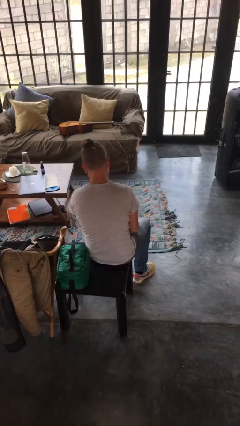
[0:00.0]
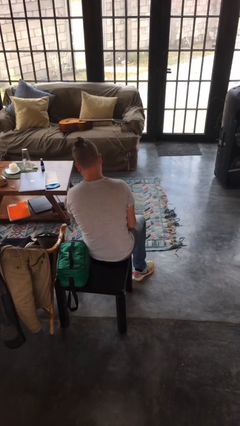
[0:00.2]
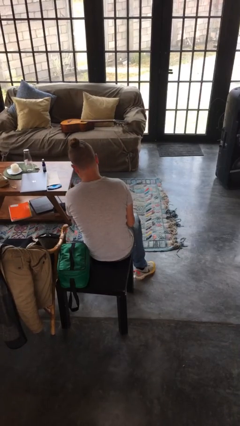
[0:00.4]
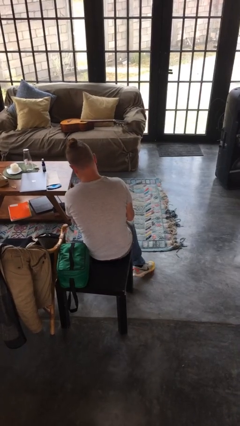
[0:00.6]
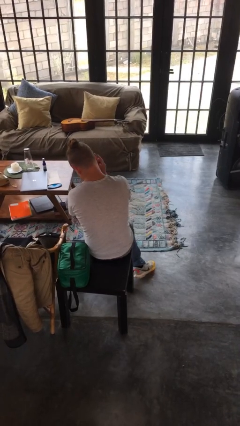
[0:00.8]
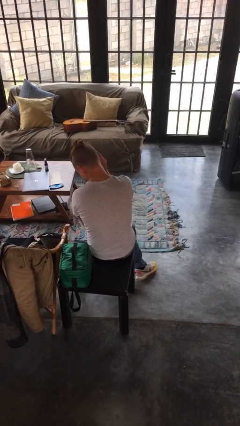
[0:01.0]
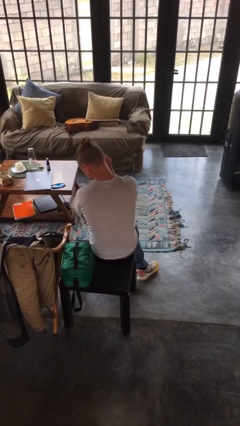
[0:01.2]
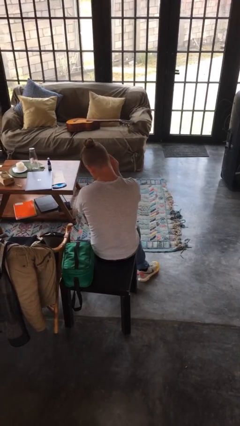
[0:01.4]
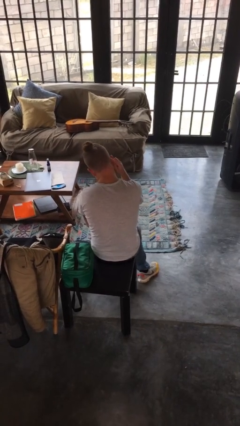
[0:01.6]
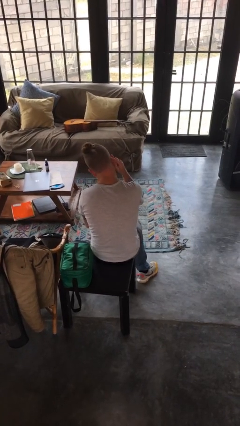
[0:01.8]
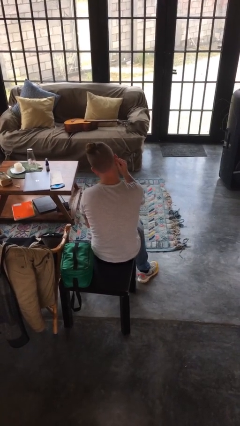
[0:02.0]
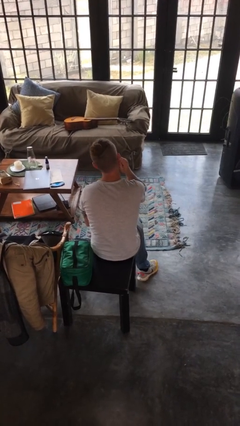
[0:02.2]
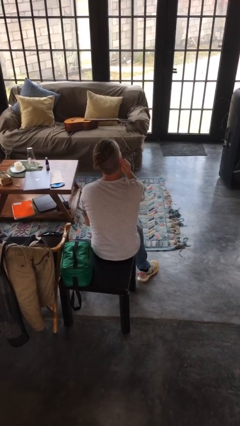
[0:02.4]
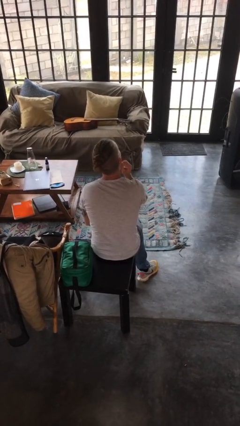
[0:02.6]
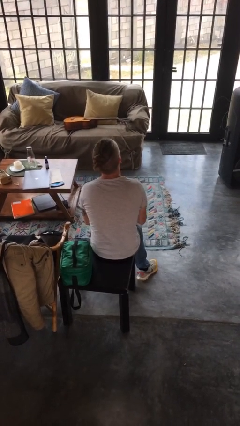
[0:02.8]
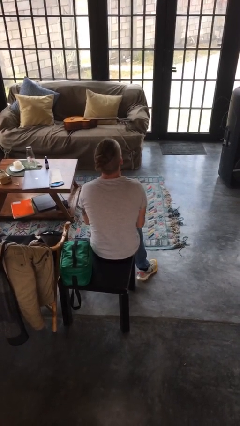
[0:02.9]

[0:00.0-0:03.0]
person touches earlobe

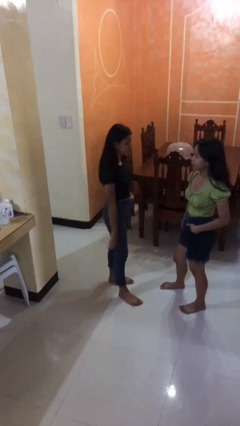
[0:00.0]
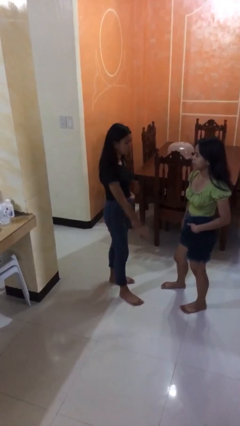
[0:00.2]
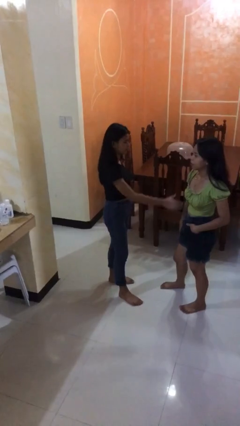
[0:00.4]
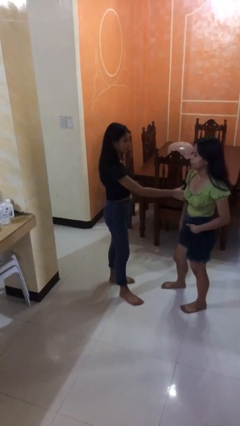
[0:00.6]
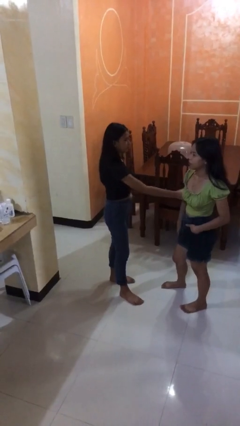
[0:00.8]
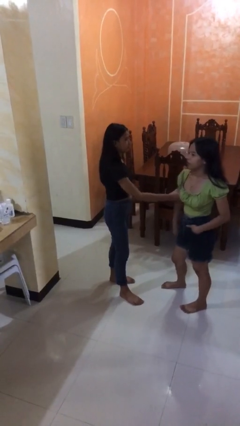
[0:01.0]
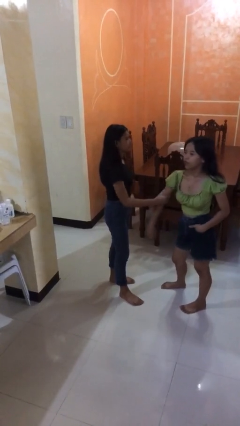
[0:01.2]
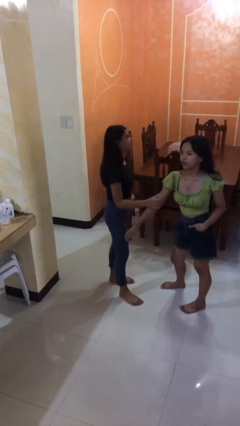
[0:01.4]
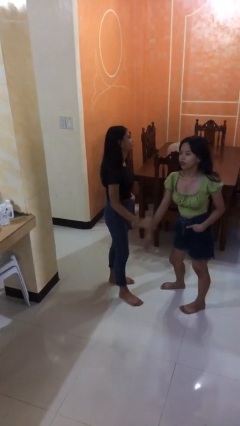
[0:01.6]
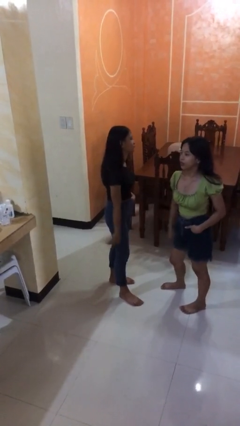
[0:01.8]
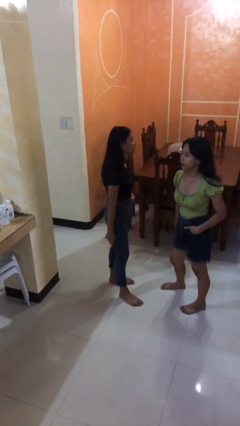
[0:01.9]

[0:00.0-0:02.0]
person grabs person by bicep

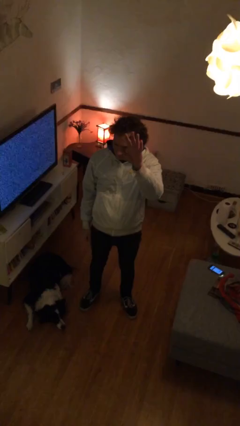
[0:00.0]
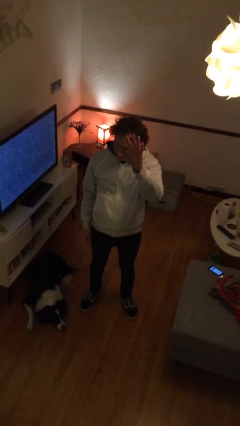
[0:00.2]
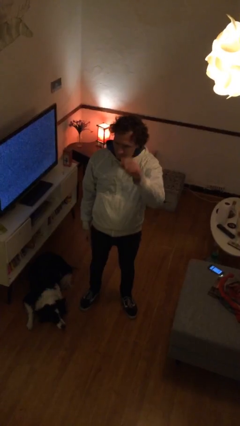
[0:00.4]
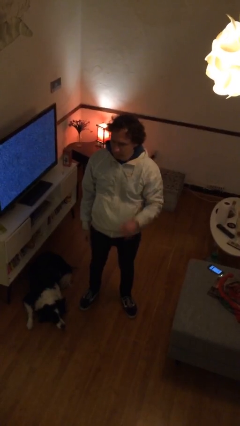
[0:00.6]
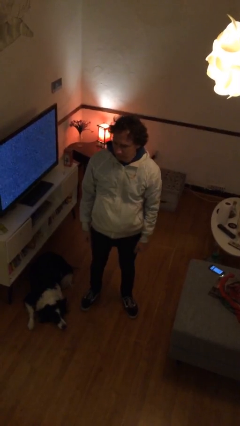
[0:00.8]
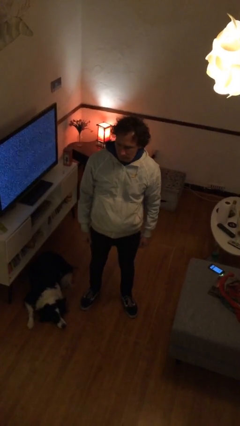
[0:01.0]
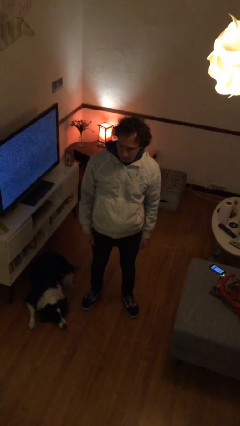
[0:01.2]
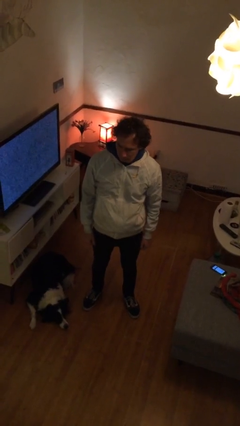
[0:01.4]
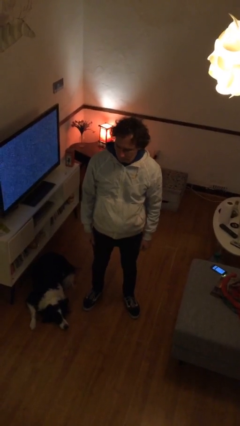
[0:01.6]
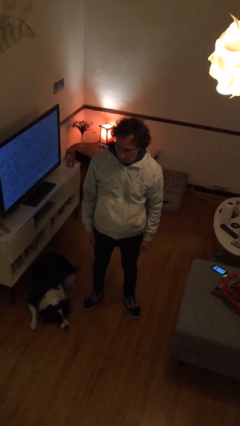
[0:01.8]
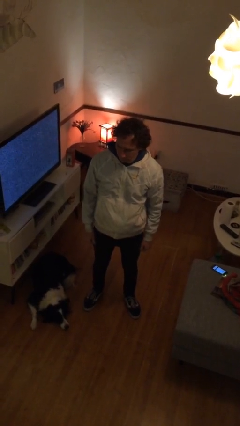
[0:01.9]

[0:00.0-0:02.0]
person gestures lower hand

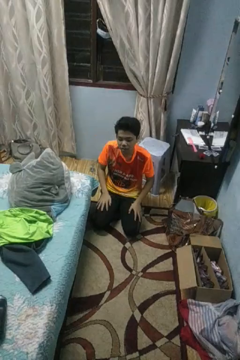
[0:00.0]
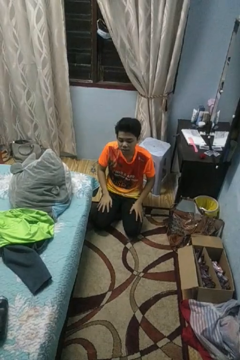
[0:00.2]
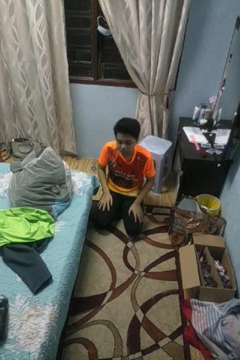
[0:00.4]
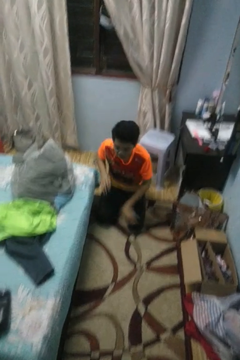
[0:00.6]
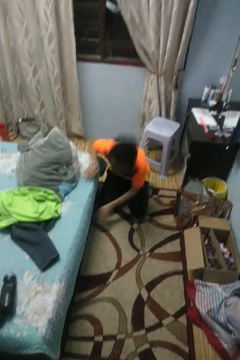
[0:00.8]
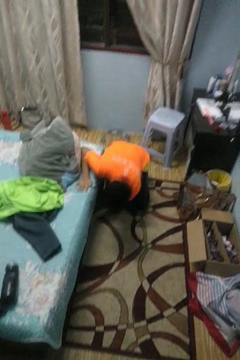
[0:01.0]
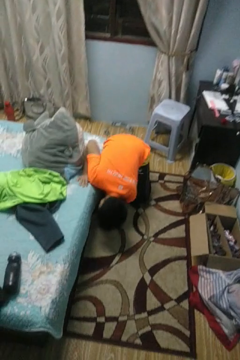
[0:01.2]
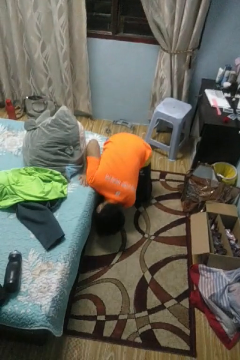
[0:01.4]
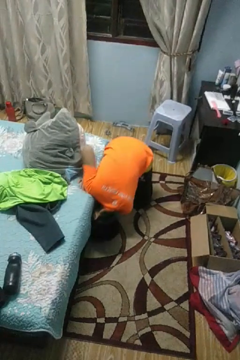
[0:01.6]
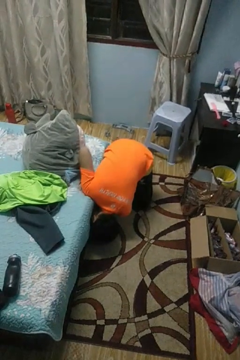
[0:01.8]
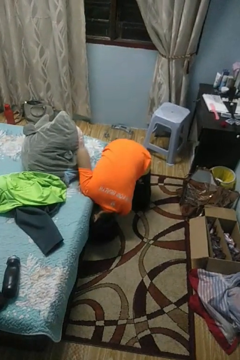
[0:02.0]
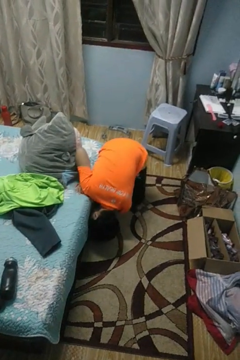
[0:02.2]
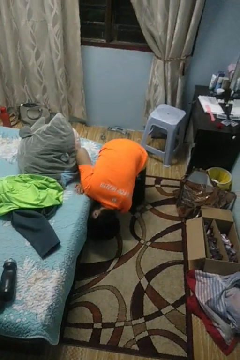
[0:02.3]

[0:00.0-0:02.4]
person searches under bed

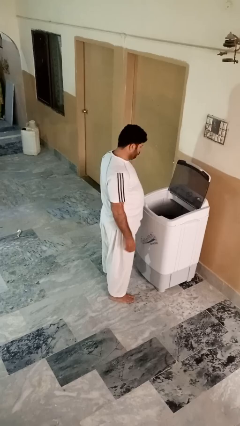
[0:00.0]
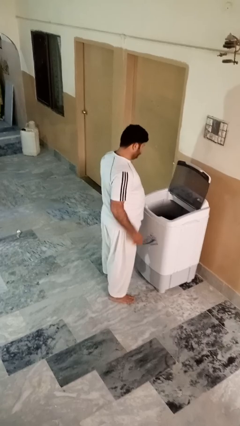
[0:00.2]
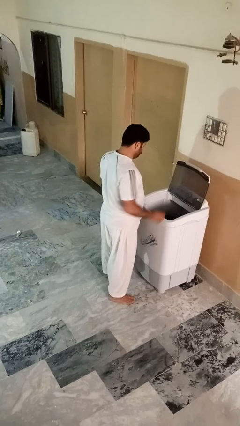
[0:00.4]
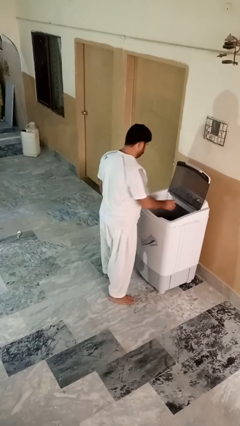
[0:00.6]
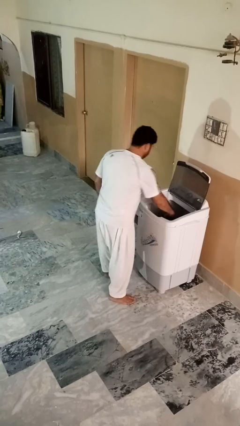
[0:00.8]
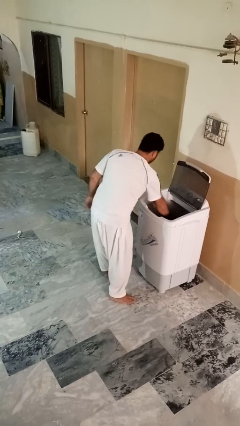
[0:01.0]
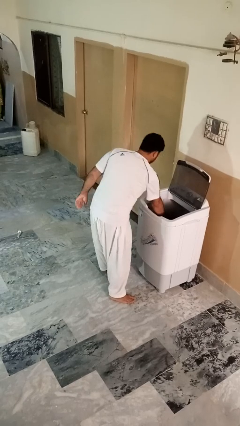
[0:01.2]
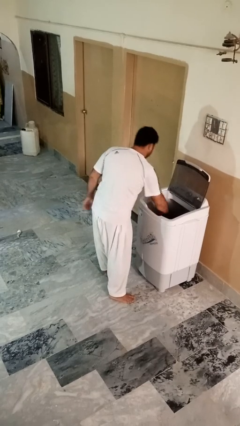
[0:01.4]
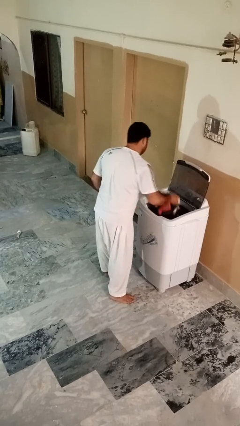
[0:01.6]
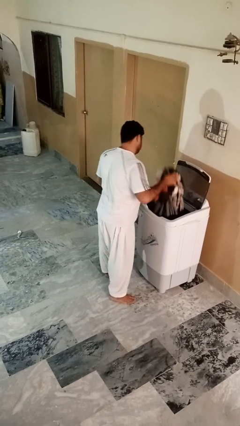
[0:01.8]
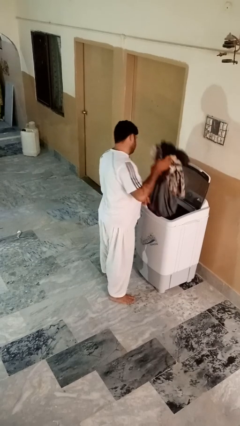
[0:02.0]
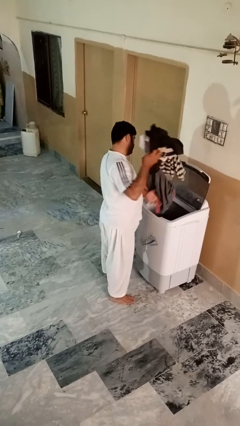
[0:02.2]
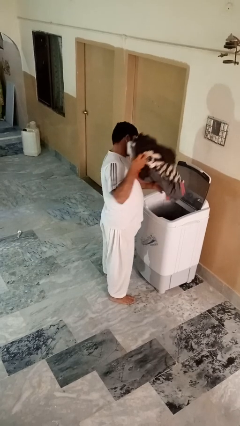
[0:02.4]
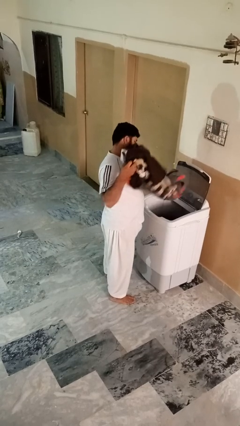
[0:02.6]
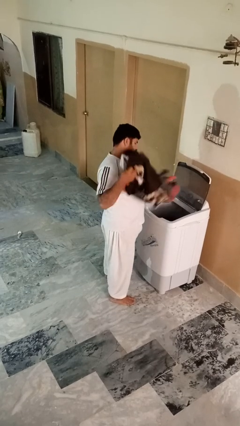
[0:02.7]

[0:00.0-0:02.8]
person unloads clotheswasher

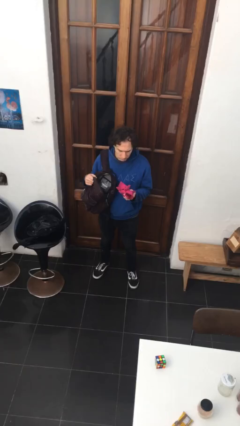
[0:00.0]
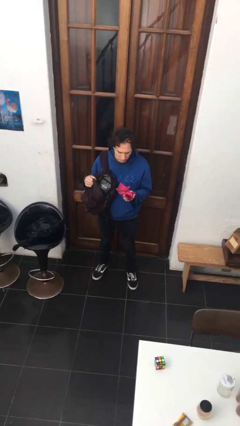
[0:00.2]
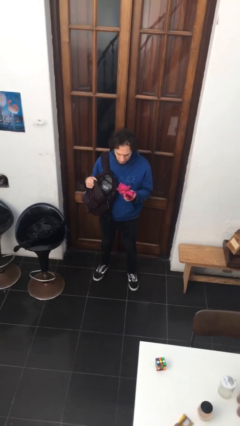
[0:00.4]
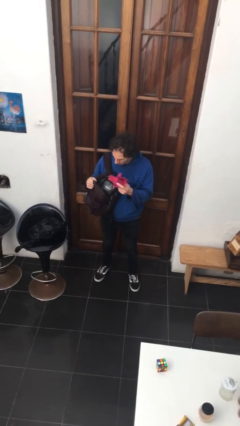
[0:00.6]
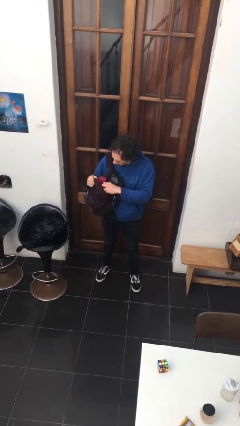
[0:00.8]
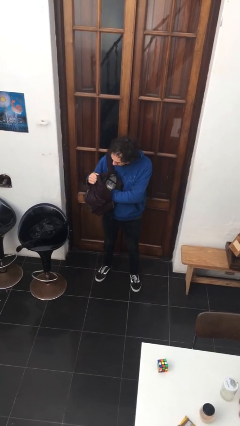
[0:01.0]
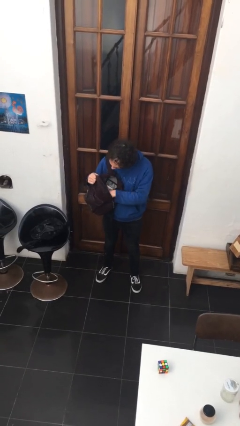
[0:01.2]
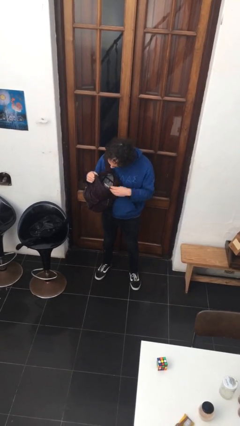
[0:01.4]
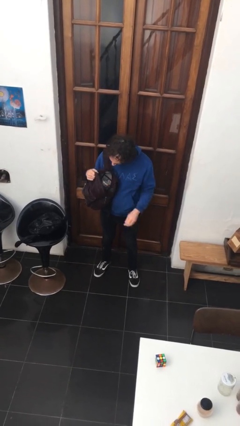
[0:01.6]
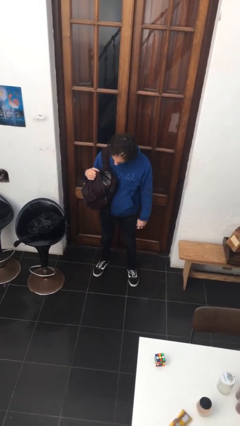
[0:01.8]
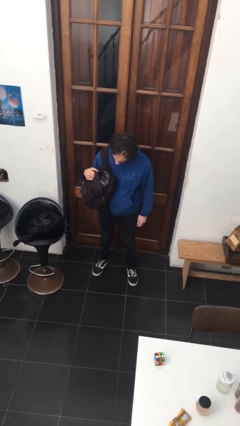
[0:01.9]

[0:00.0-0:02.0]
person puts object into backpack

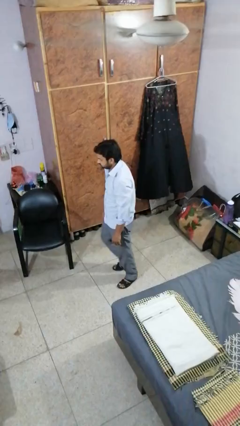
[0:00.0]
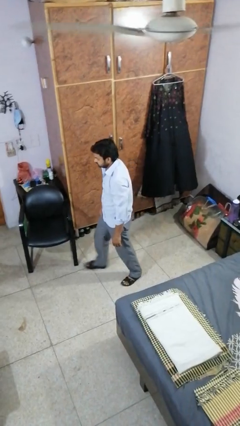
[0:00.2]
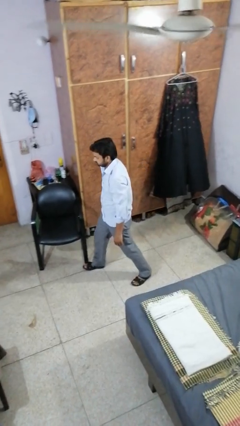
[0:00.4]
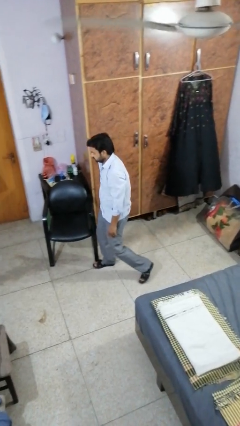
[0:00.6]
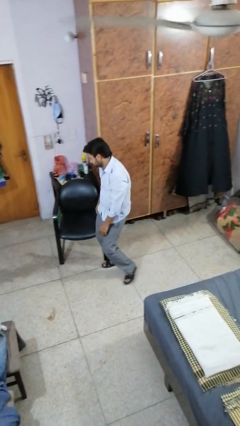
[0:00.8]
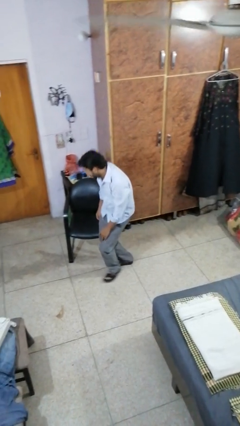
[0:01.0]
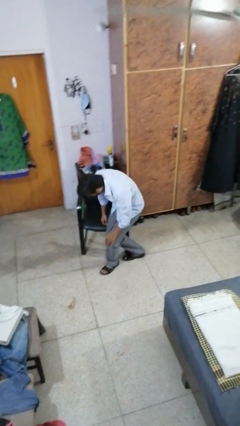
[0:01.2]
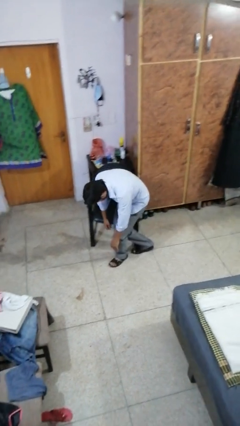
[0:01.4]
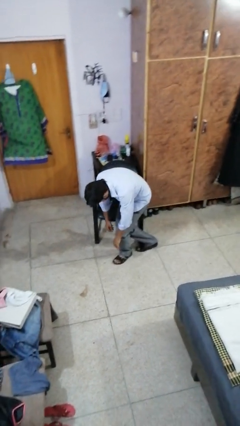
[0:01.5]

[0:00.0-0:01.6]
person trips on object on floor

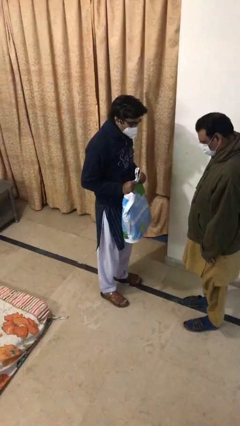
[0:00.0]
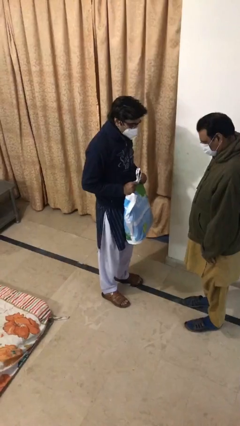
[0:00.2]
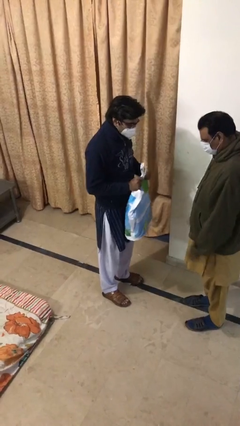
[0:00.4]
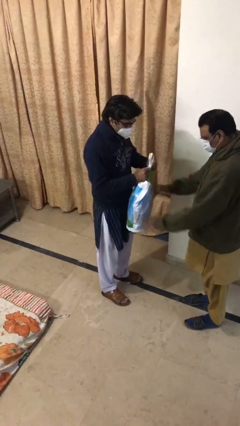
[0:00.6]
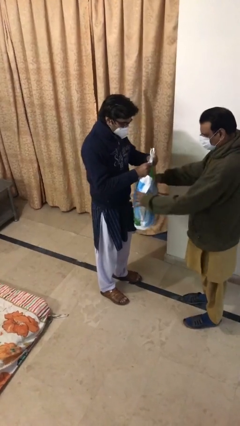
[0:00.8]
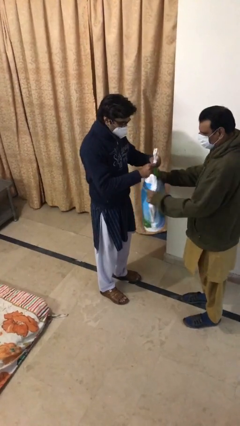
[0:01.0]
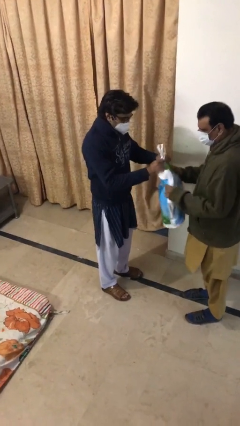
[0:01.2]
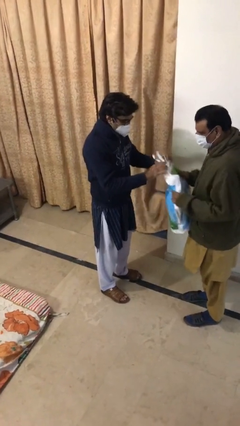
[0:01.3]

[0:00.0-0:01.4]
person transfers object to person

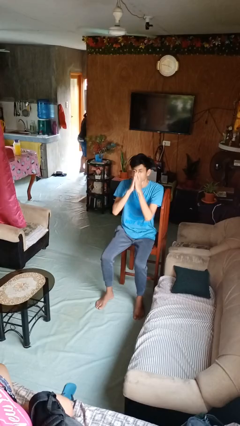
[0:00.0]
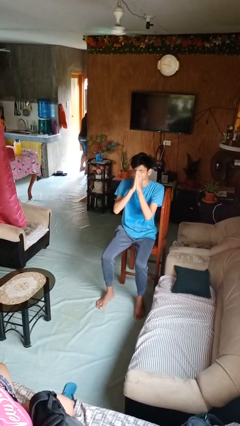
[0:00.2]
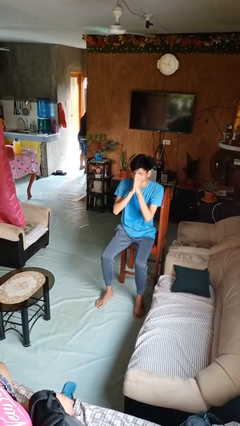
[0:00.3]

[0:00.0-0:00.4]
person sneezes into hand
